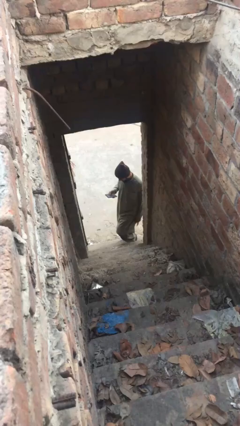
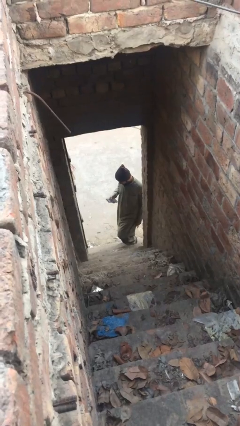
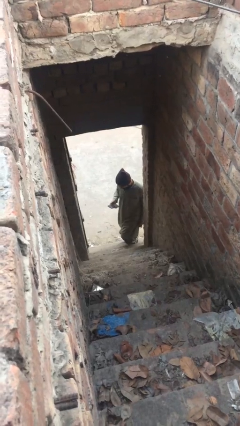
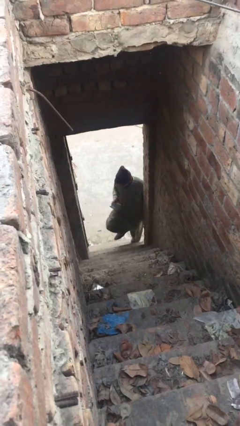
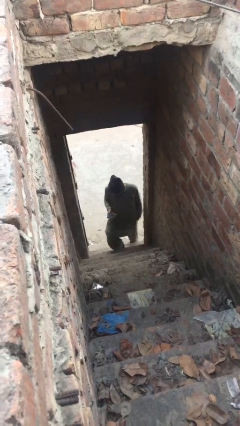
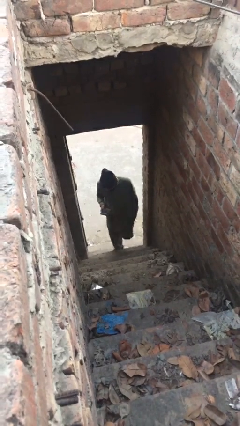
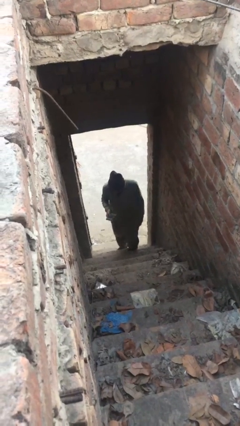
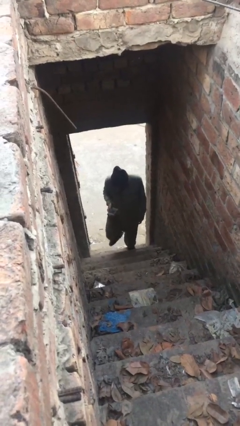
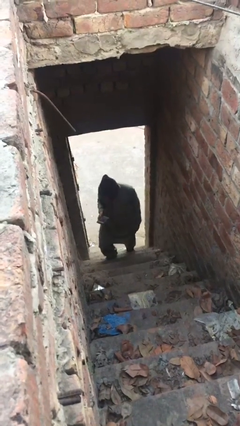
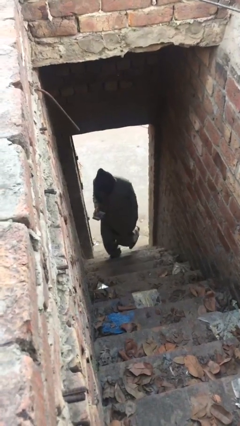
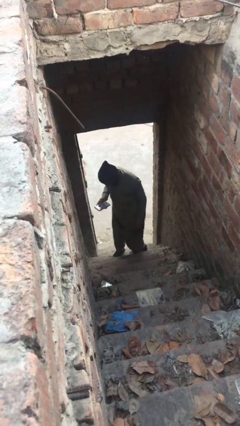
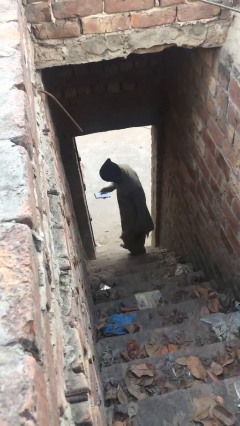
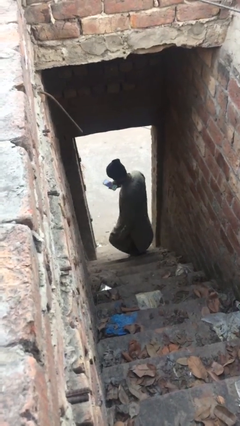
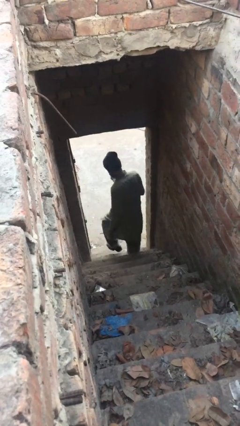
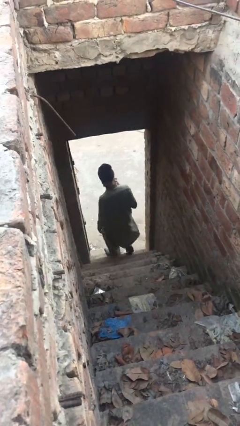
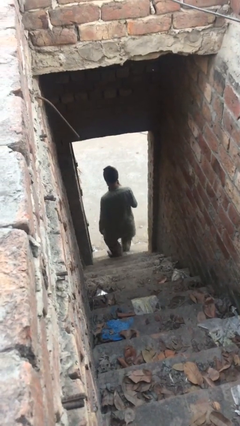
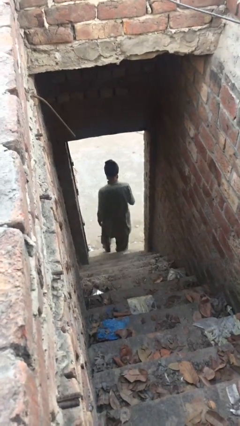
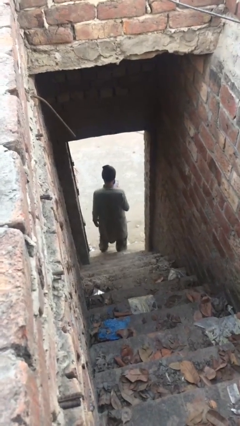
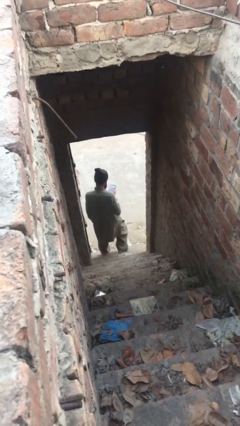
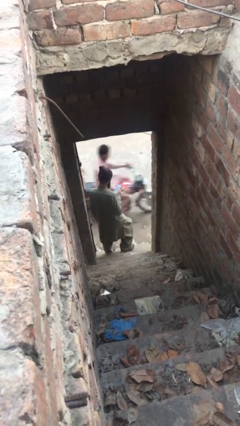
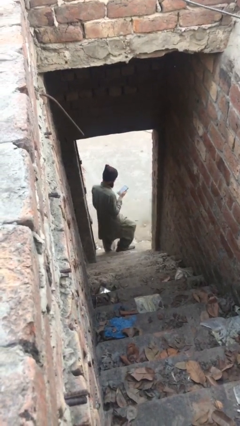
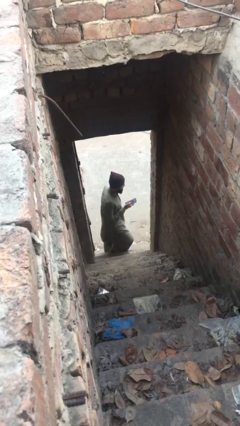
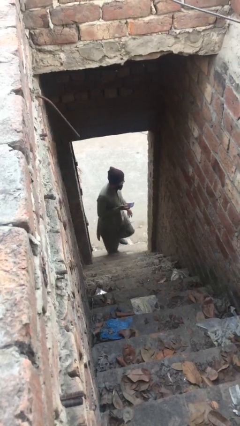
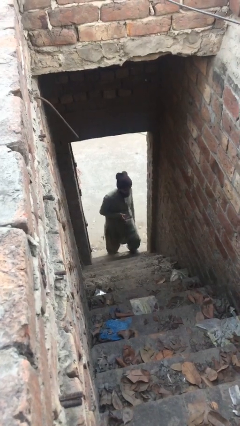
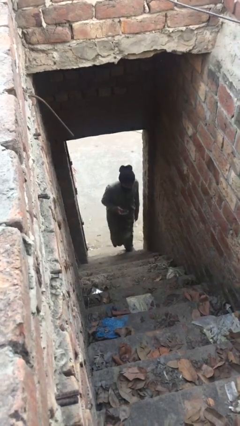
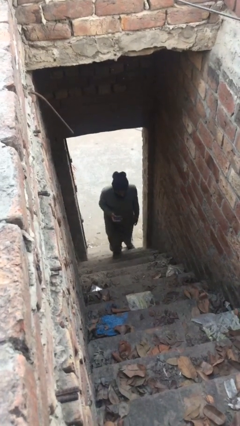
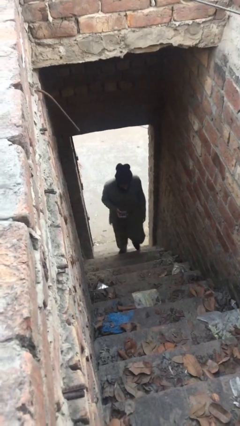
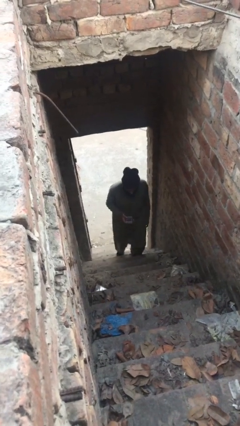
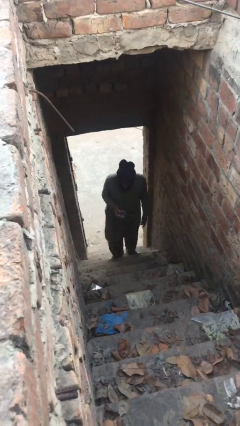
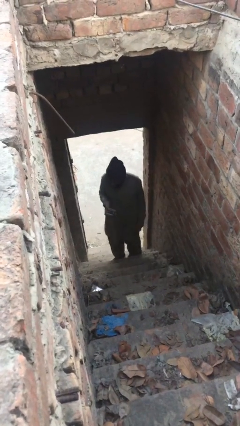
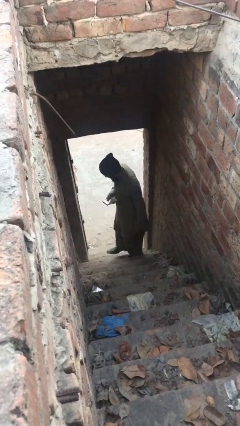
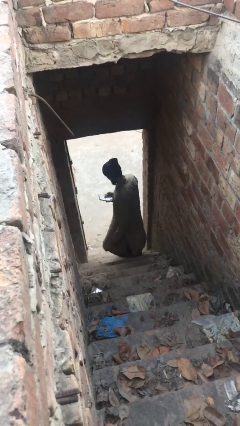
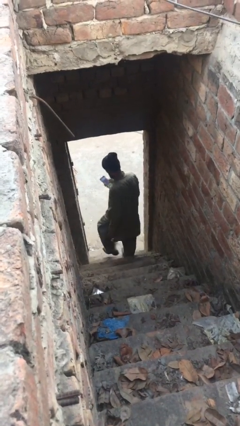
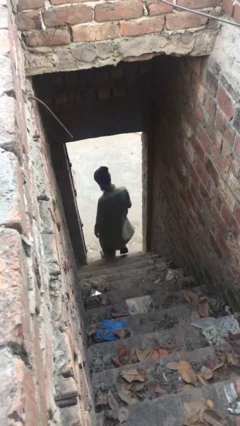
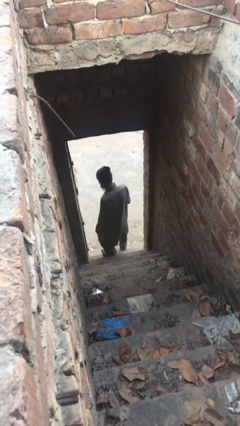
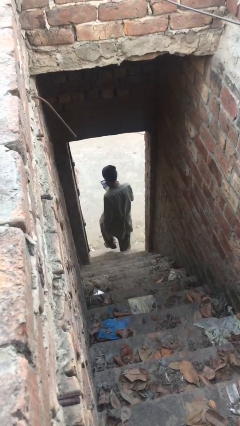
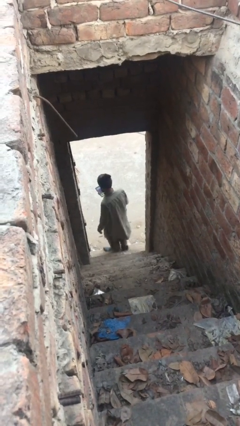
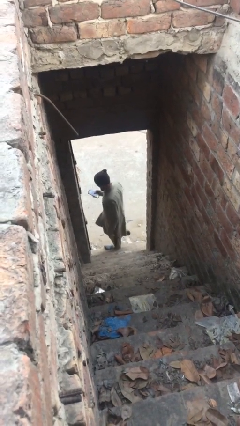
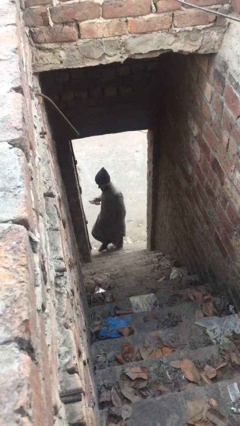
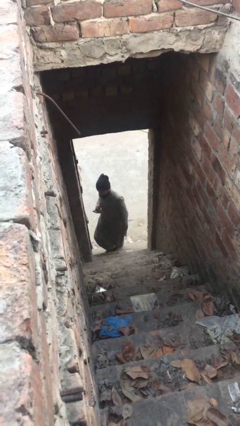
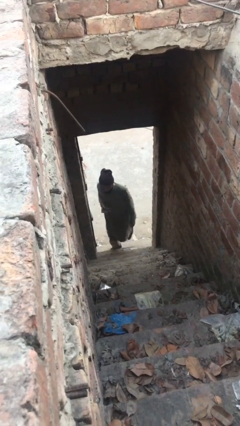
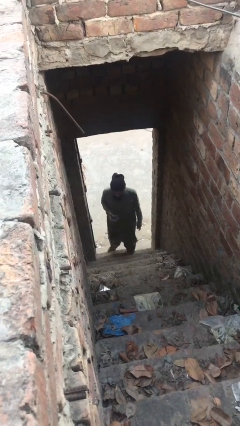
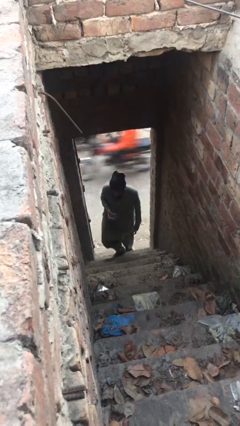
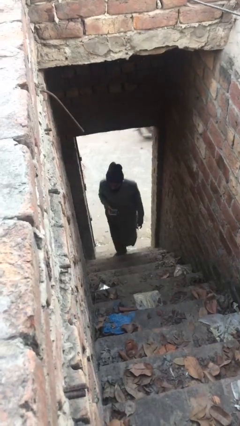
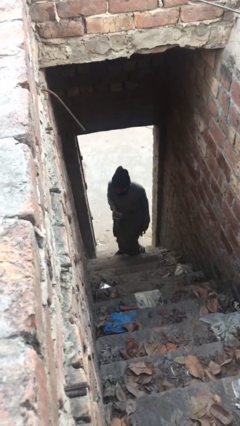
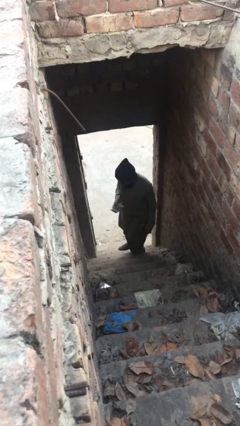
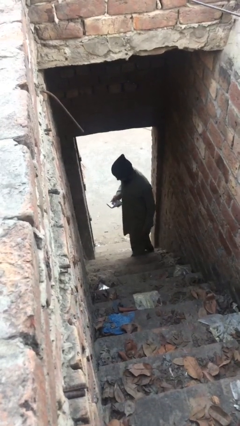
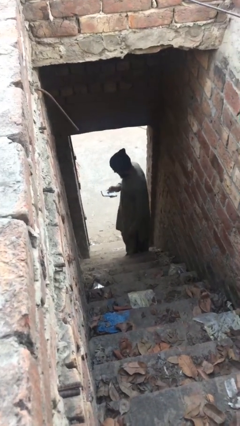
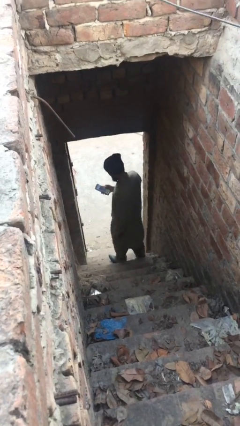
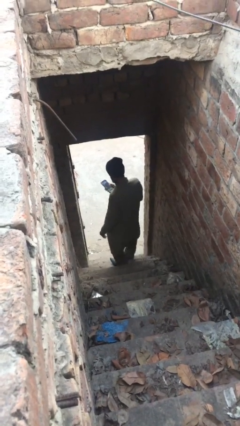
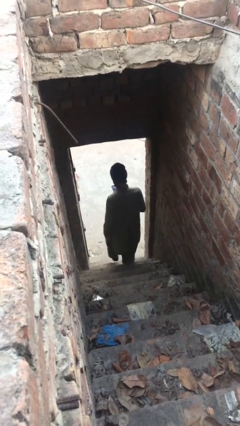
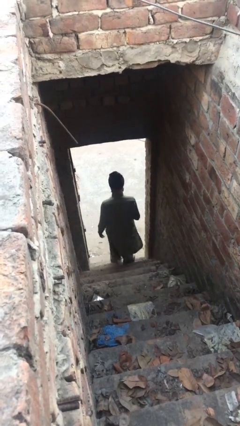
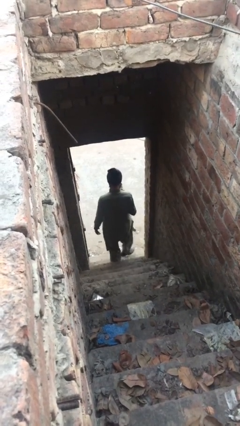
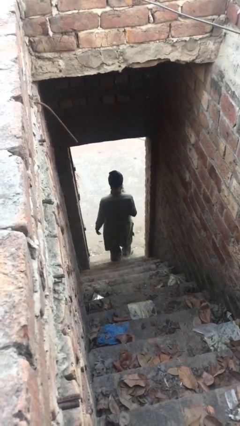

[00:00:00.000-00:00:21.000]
person texts on phone

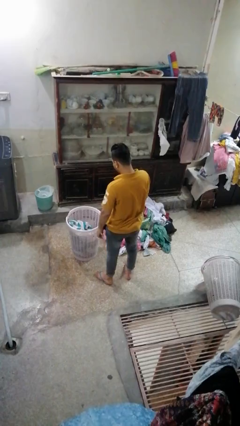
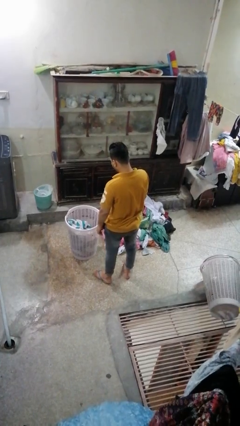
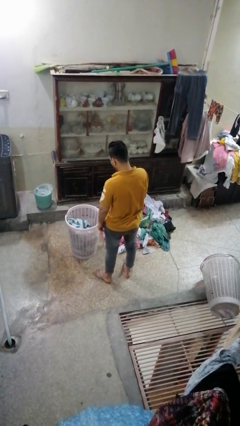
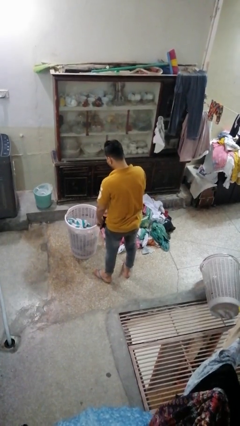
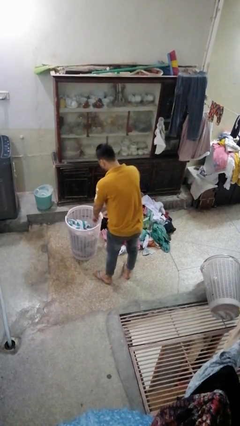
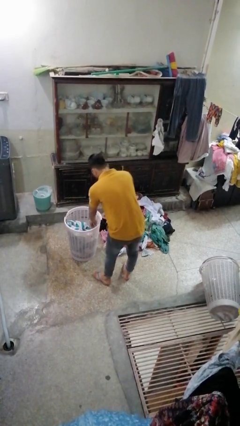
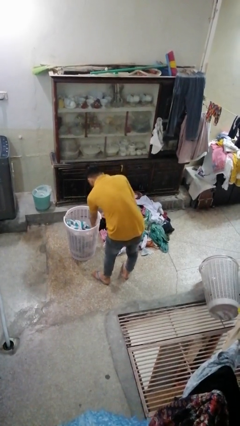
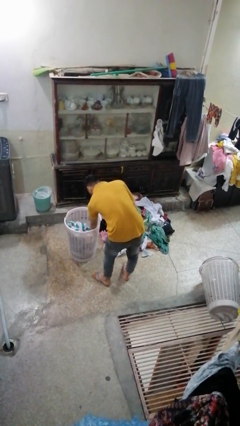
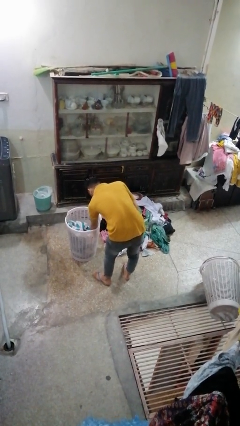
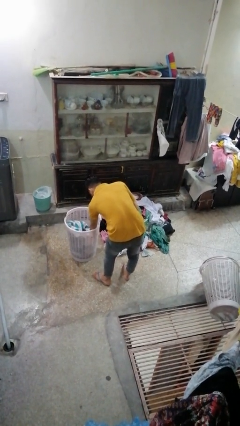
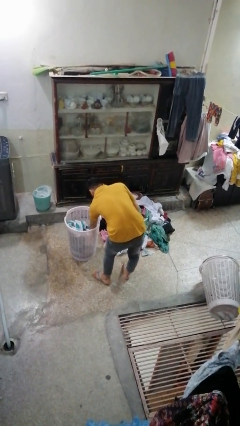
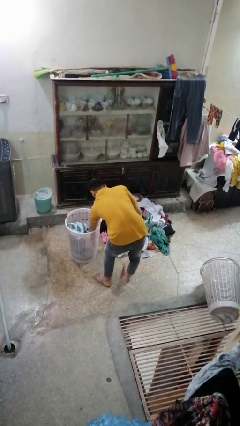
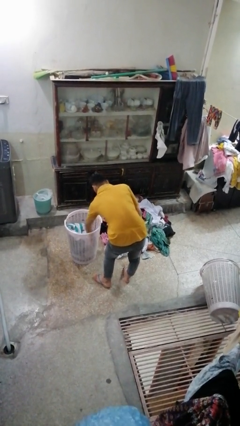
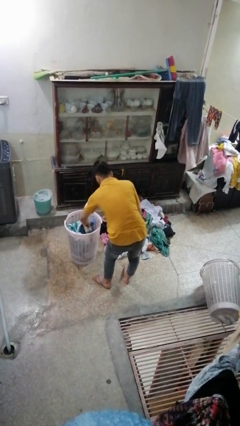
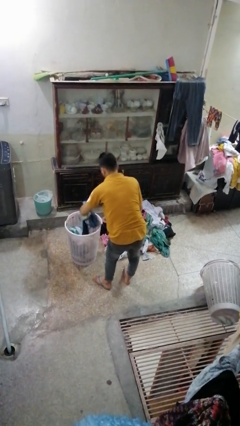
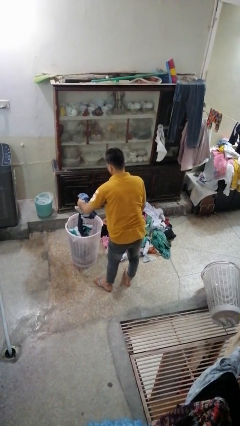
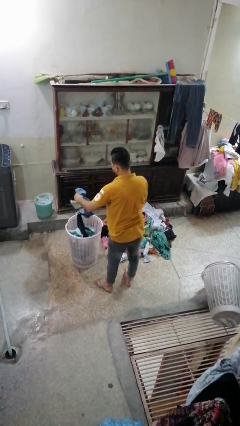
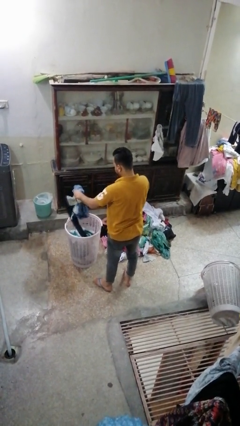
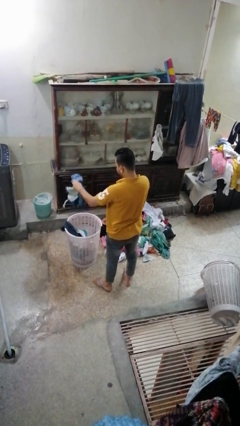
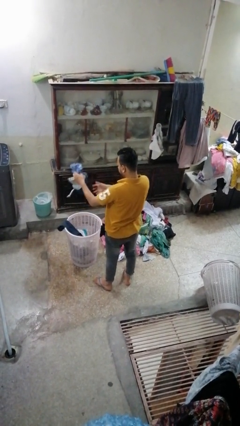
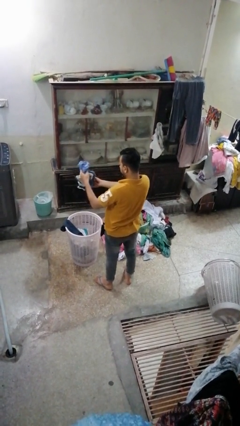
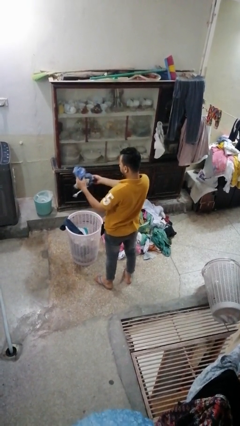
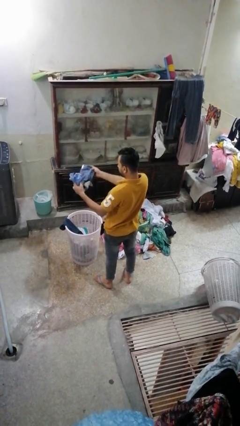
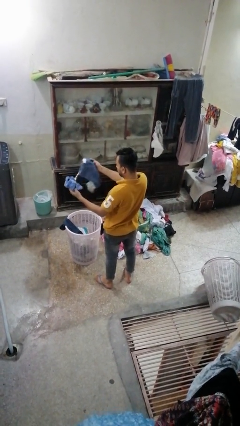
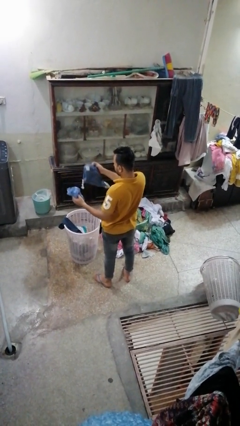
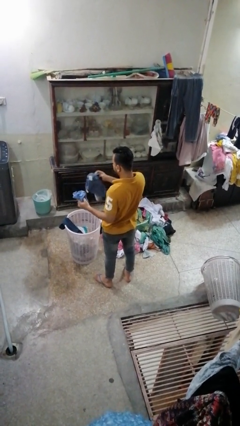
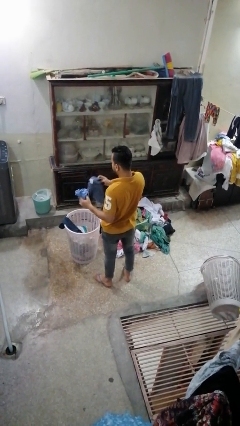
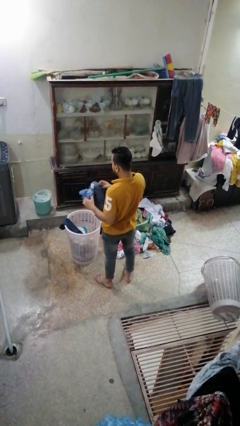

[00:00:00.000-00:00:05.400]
person takes object from basket

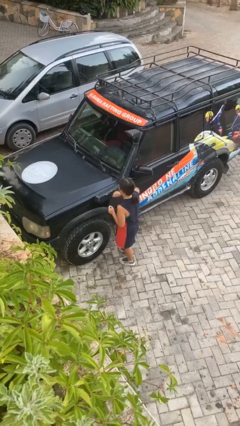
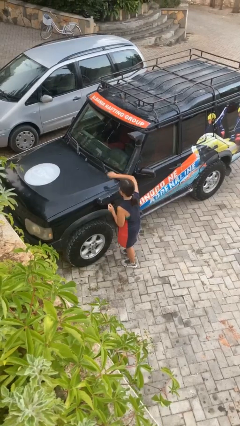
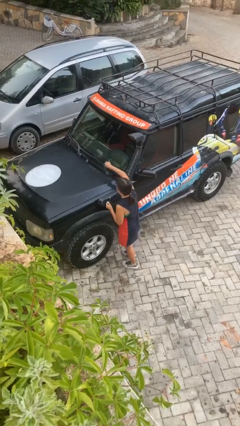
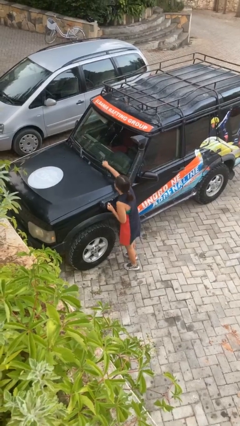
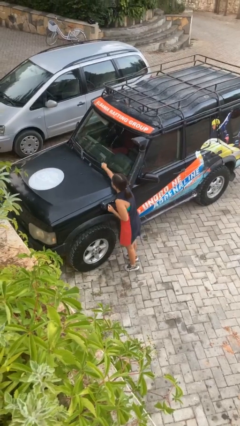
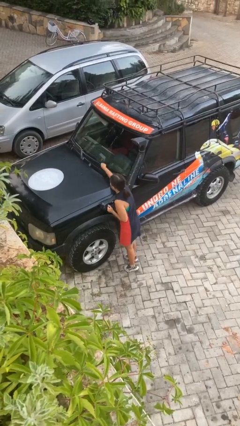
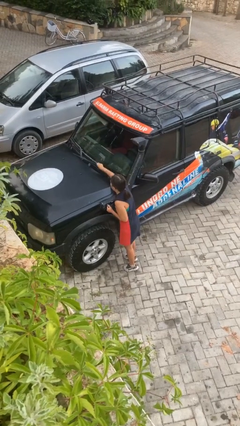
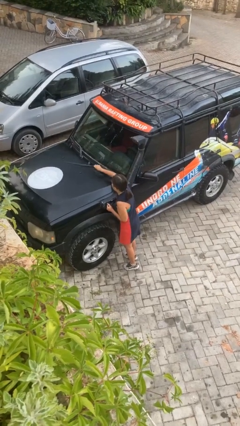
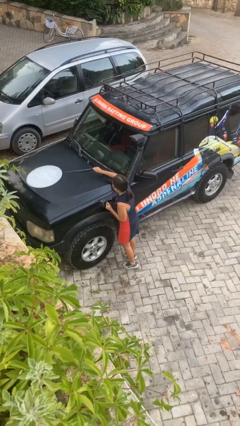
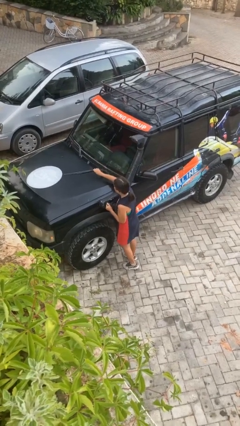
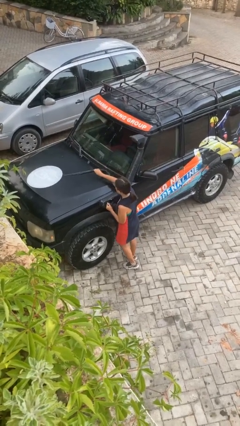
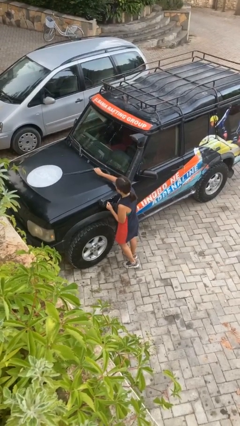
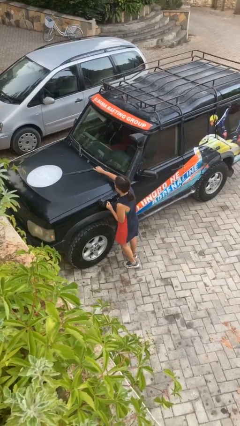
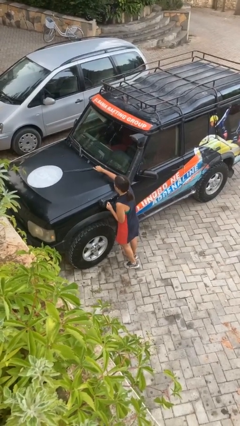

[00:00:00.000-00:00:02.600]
person flips up car wipers
